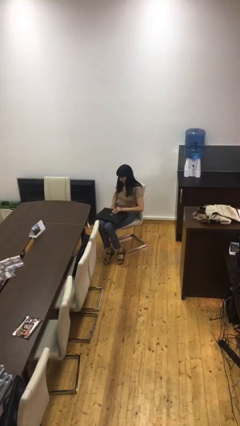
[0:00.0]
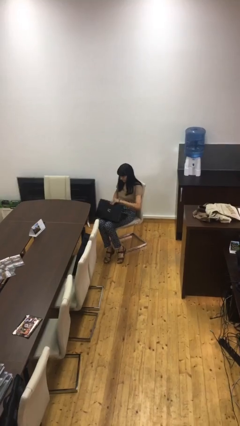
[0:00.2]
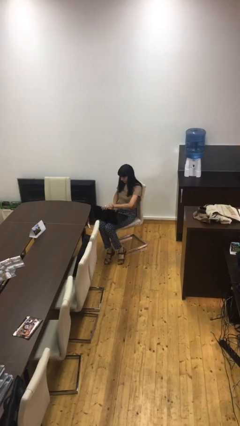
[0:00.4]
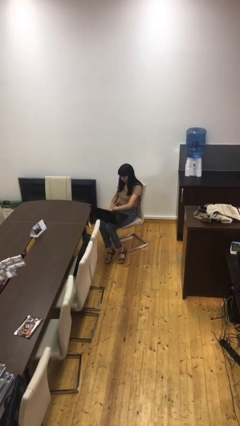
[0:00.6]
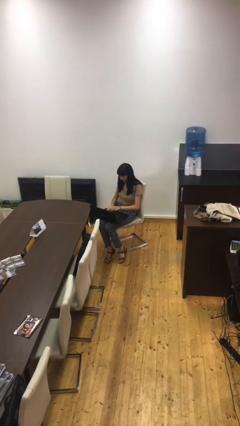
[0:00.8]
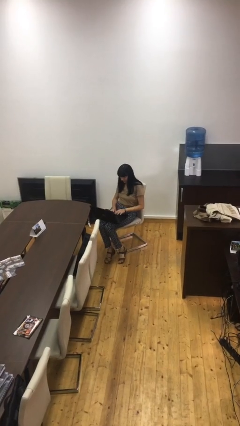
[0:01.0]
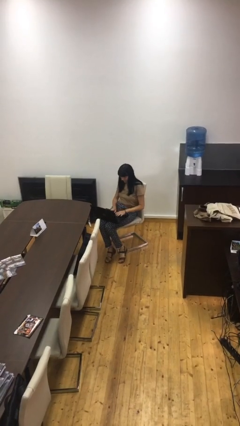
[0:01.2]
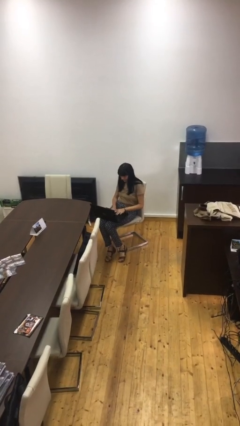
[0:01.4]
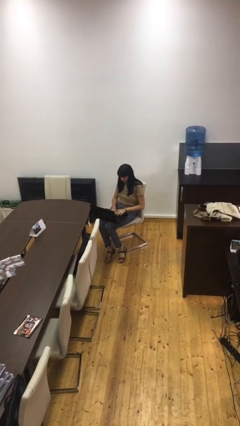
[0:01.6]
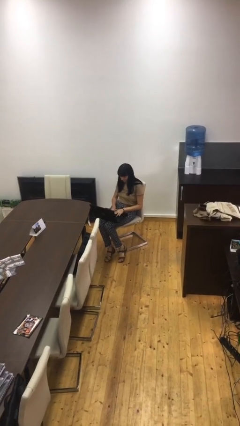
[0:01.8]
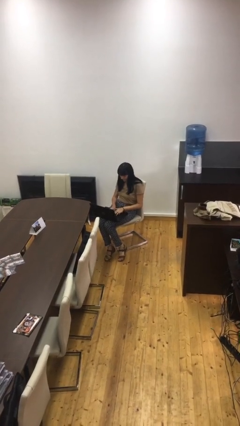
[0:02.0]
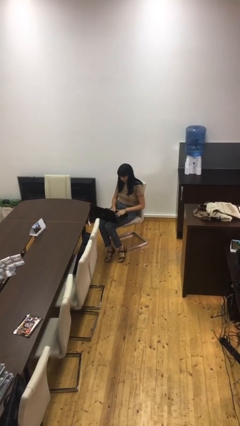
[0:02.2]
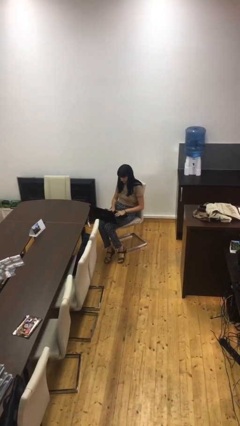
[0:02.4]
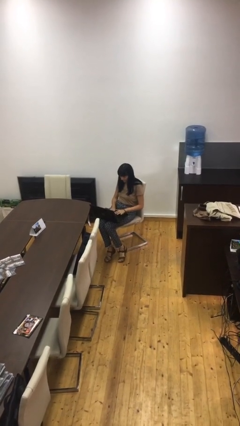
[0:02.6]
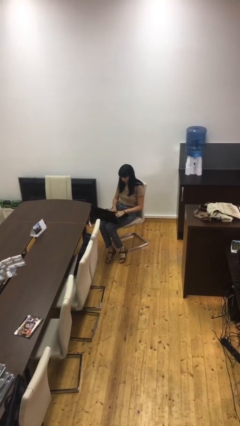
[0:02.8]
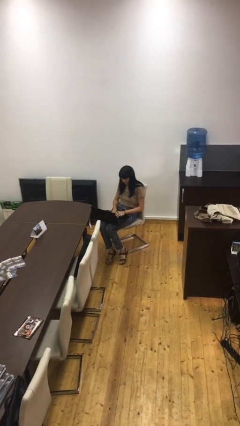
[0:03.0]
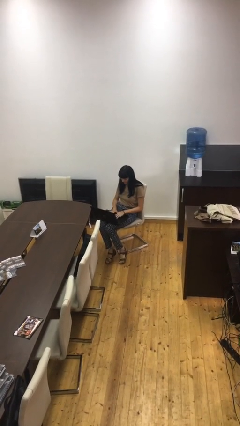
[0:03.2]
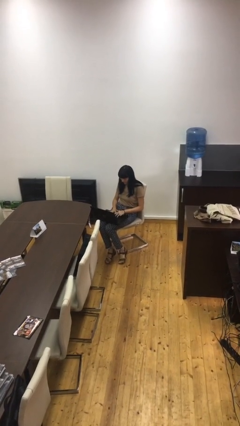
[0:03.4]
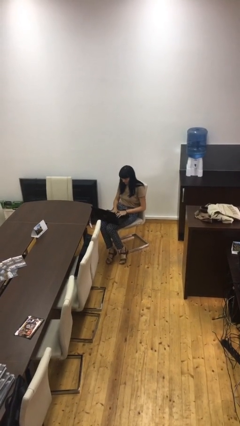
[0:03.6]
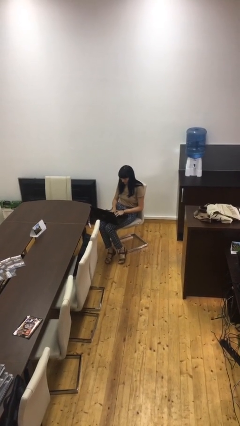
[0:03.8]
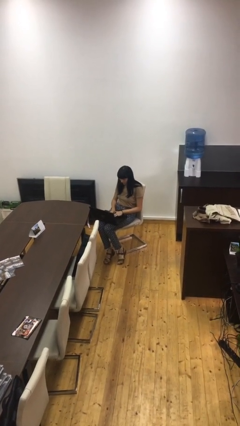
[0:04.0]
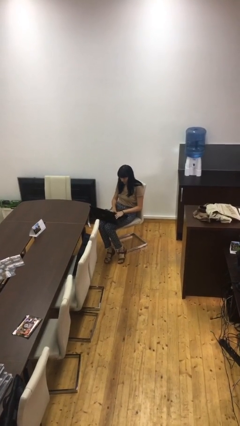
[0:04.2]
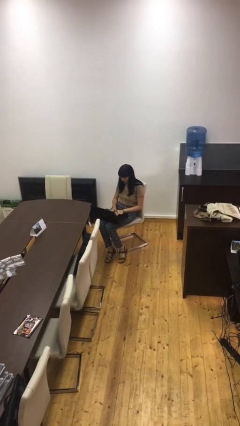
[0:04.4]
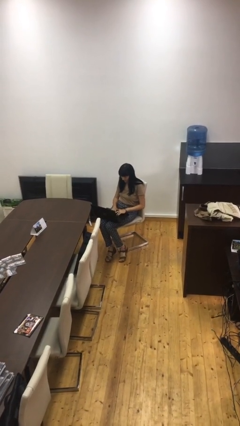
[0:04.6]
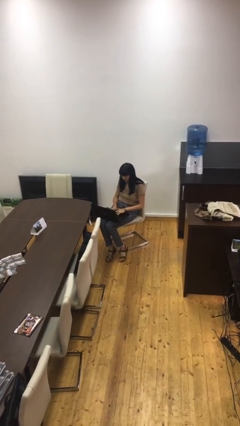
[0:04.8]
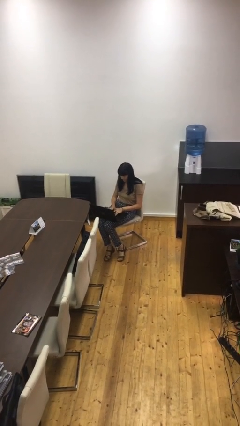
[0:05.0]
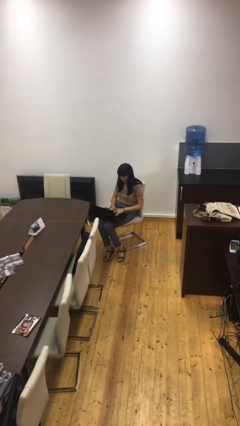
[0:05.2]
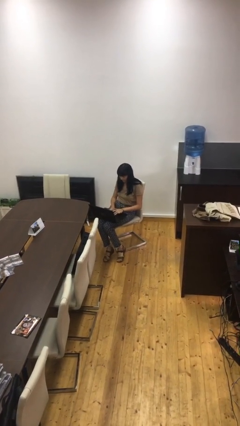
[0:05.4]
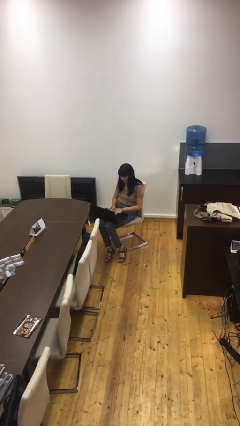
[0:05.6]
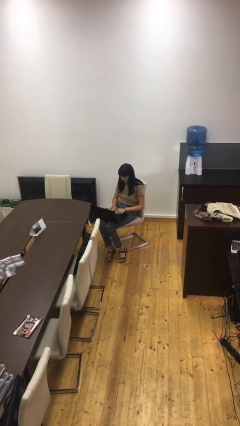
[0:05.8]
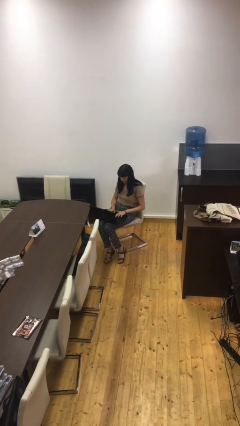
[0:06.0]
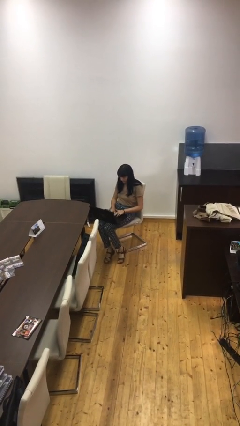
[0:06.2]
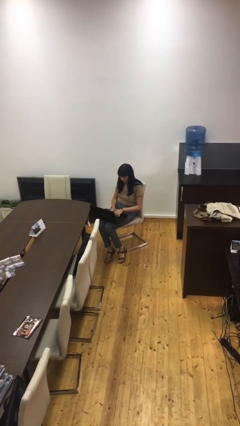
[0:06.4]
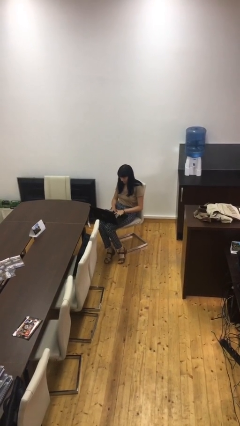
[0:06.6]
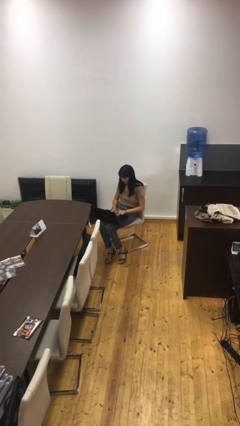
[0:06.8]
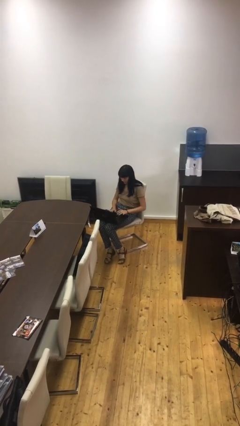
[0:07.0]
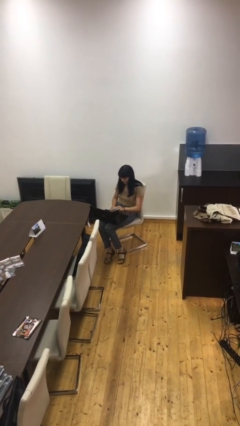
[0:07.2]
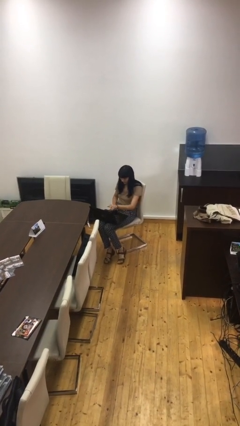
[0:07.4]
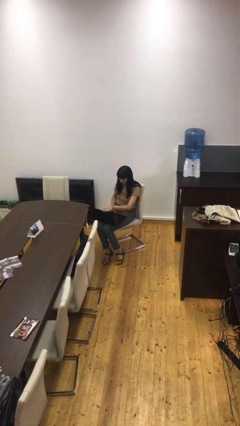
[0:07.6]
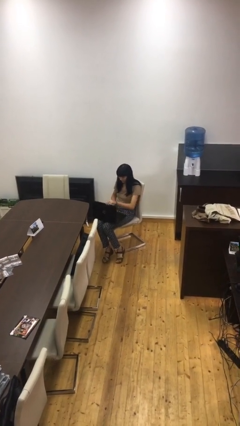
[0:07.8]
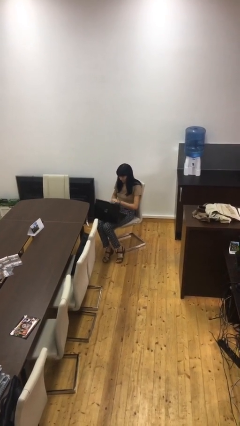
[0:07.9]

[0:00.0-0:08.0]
person interacts with laptop

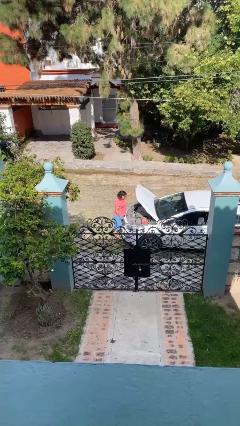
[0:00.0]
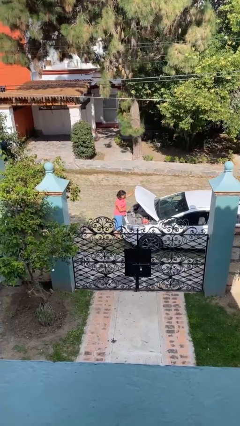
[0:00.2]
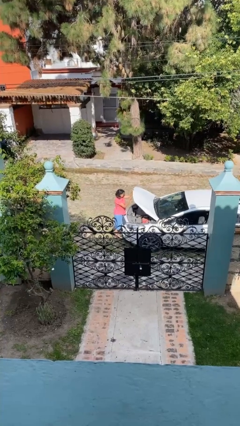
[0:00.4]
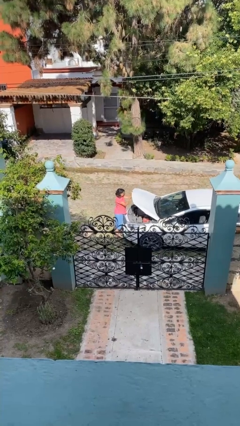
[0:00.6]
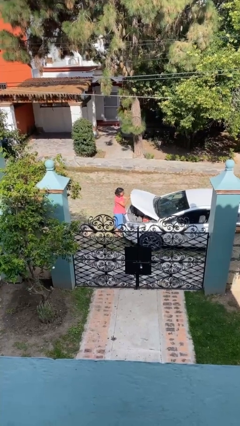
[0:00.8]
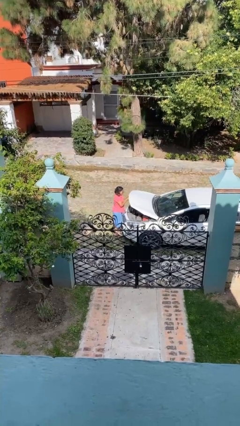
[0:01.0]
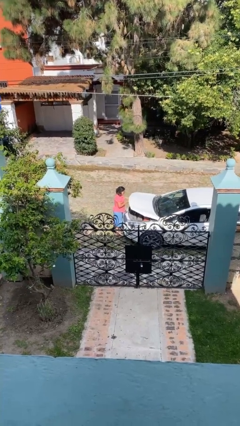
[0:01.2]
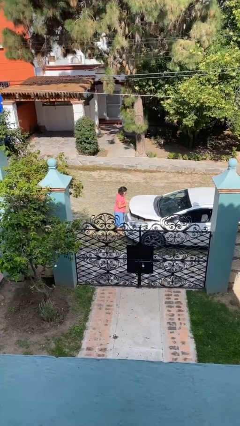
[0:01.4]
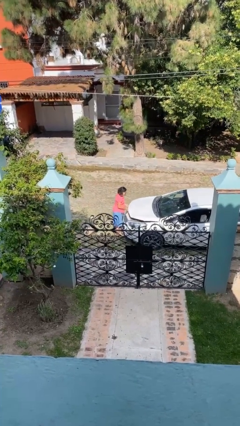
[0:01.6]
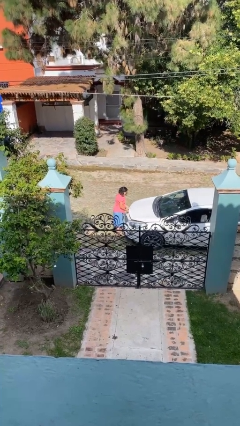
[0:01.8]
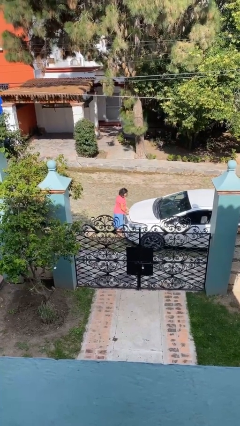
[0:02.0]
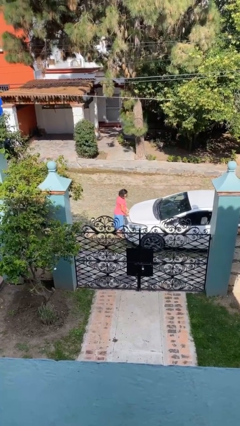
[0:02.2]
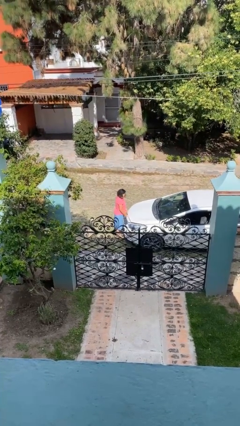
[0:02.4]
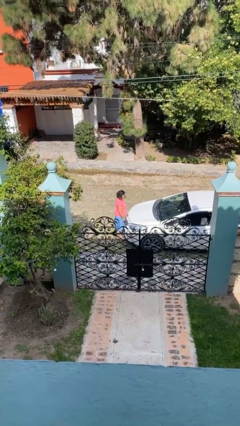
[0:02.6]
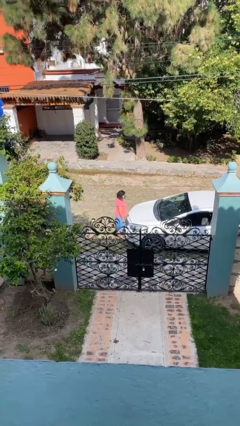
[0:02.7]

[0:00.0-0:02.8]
person closes car hood

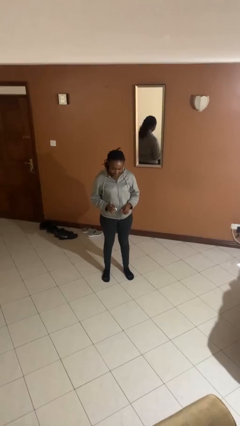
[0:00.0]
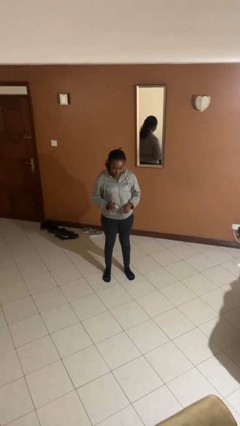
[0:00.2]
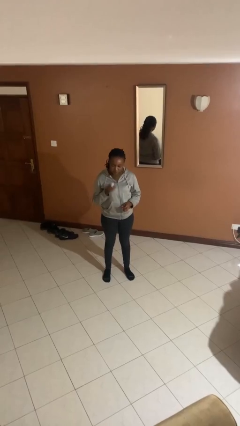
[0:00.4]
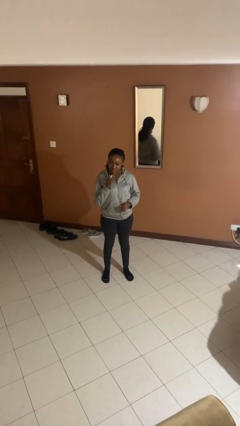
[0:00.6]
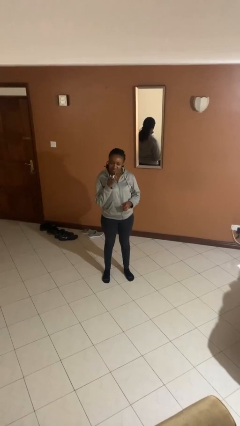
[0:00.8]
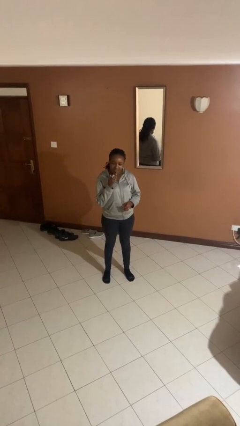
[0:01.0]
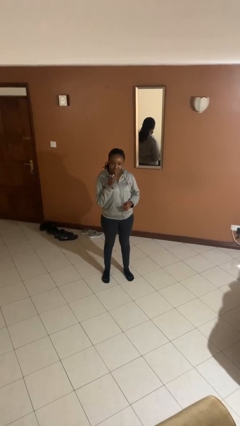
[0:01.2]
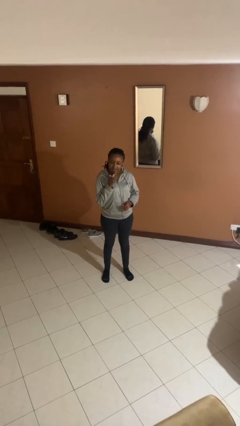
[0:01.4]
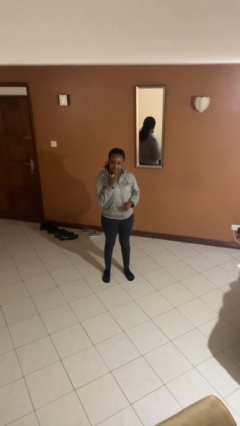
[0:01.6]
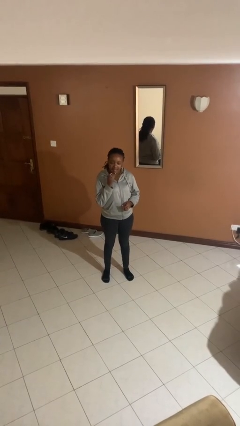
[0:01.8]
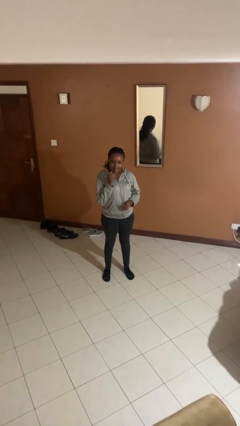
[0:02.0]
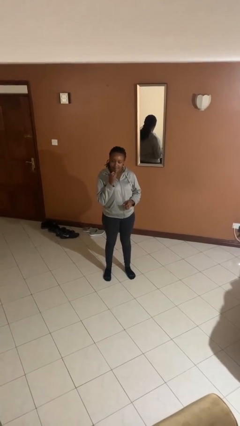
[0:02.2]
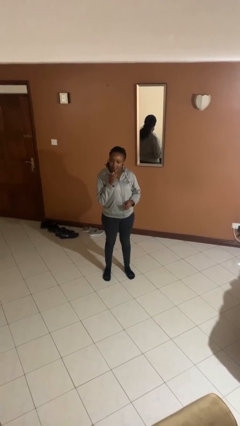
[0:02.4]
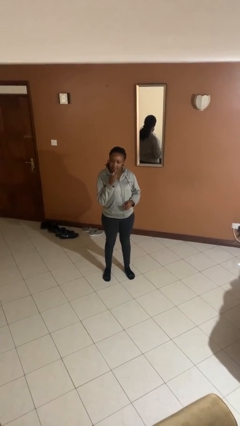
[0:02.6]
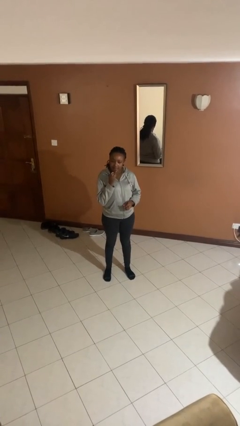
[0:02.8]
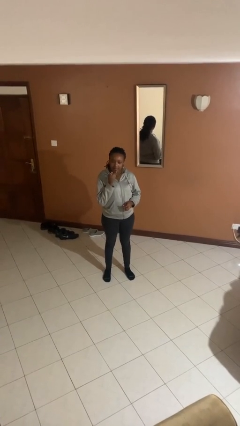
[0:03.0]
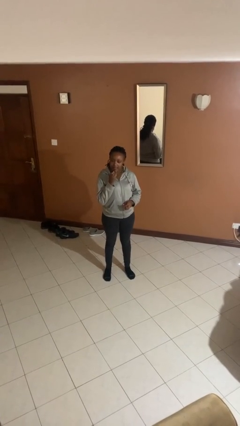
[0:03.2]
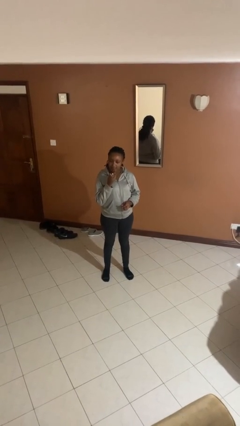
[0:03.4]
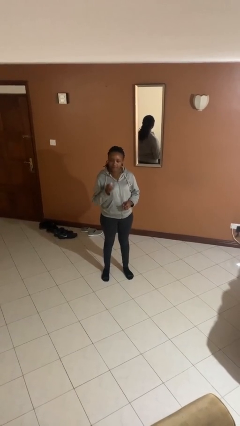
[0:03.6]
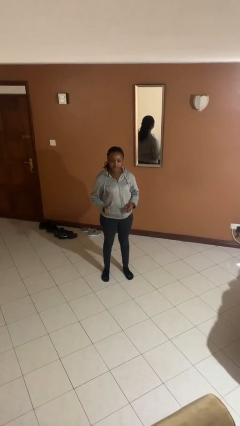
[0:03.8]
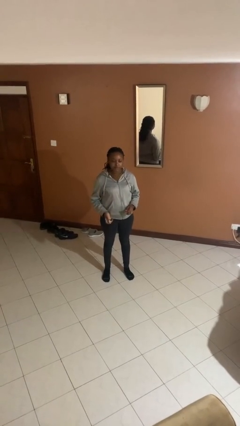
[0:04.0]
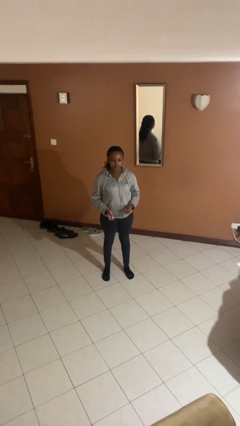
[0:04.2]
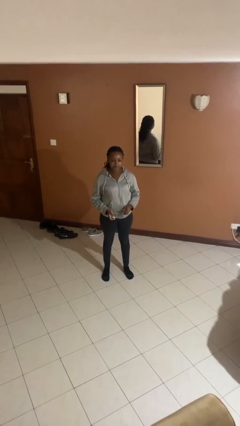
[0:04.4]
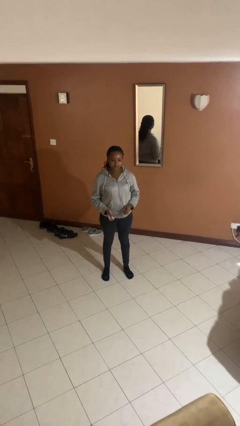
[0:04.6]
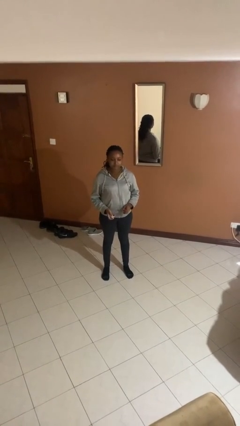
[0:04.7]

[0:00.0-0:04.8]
person applies lip makeup

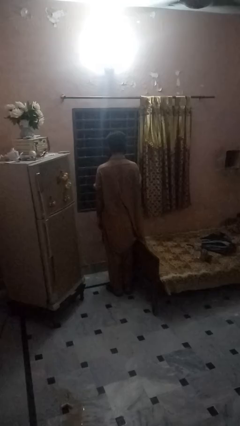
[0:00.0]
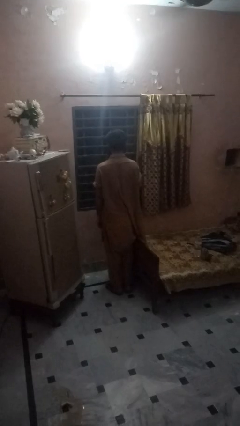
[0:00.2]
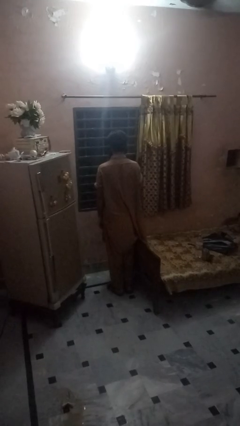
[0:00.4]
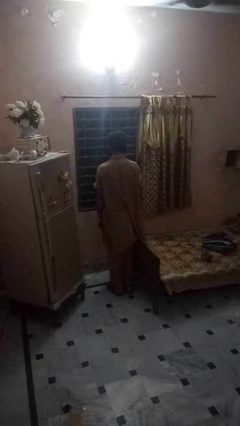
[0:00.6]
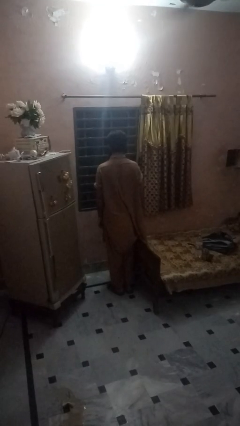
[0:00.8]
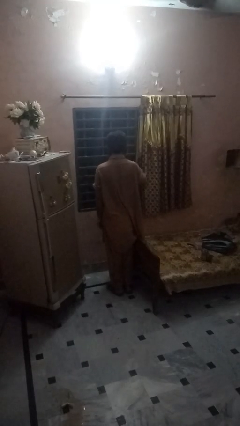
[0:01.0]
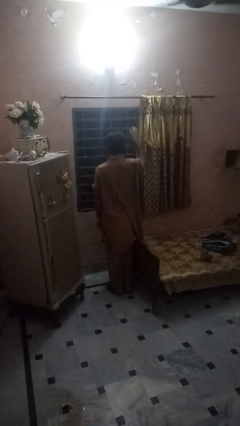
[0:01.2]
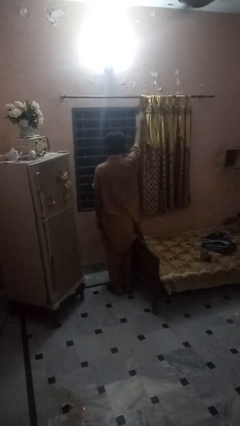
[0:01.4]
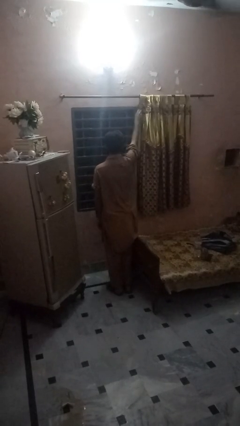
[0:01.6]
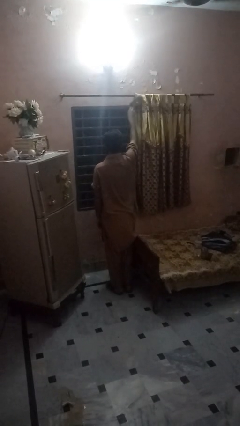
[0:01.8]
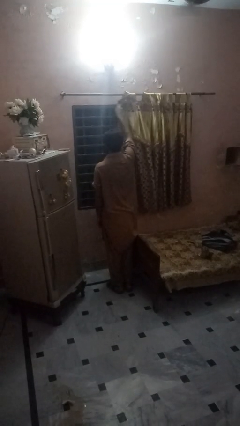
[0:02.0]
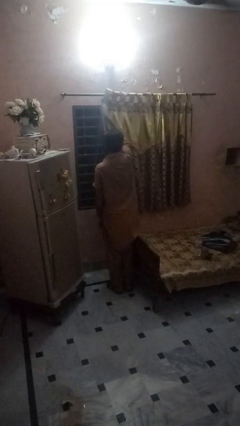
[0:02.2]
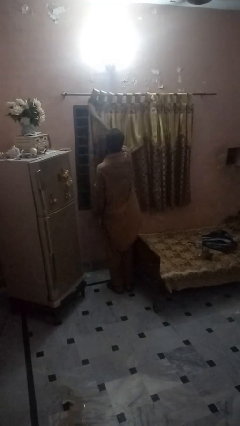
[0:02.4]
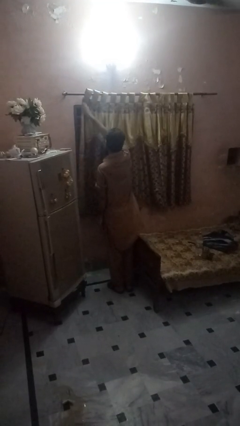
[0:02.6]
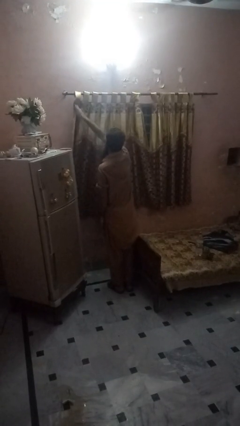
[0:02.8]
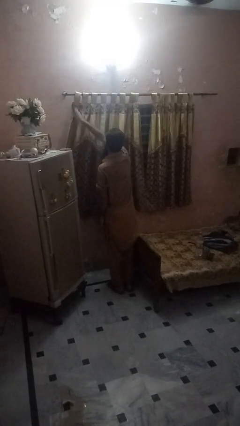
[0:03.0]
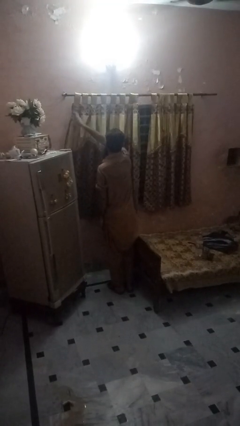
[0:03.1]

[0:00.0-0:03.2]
person closes curtains
